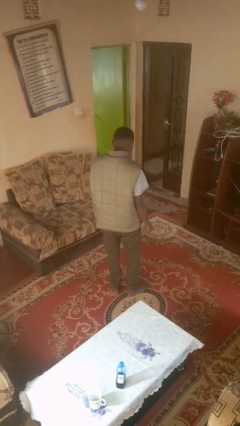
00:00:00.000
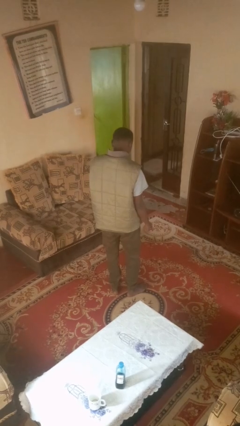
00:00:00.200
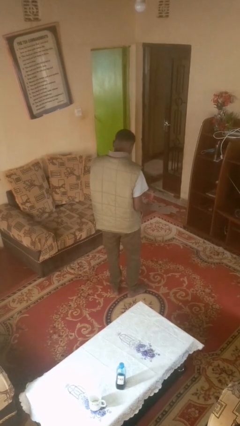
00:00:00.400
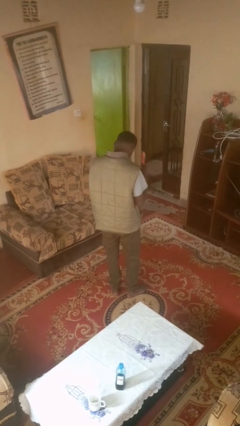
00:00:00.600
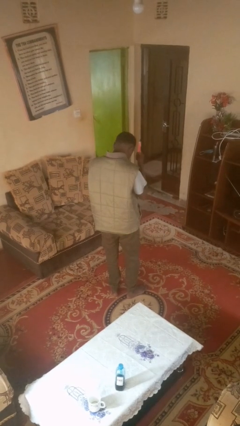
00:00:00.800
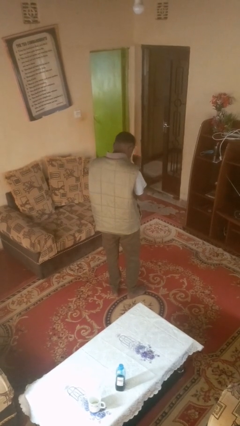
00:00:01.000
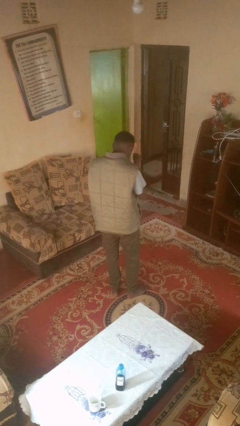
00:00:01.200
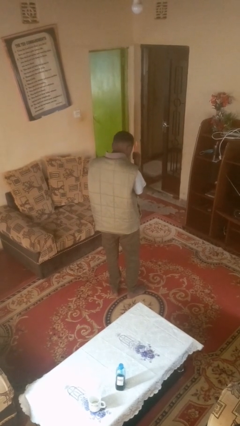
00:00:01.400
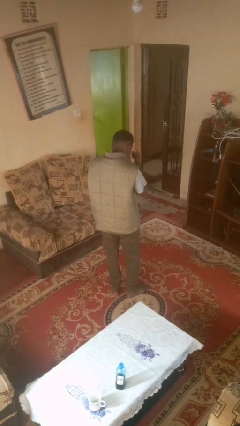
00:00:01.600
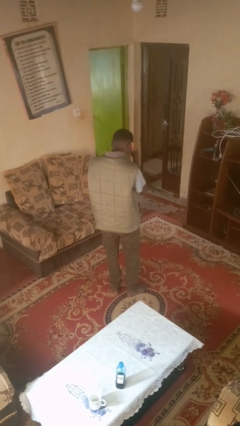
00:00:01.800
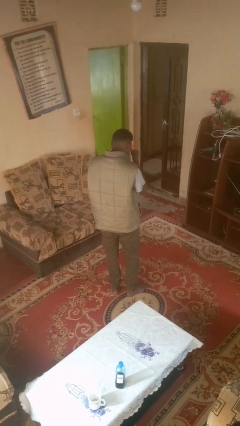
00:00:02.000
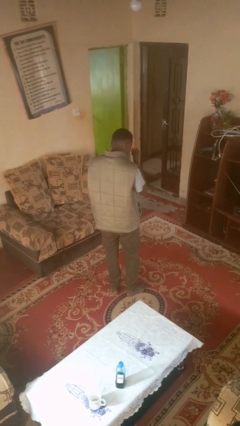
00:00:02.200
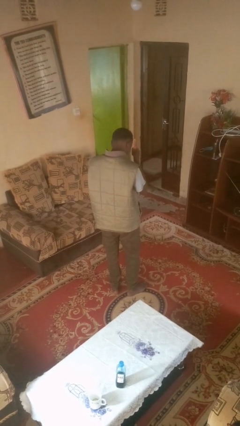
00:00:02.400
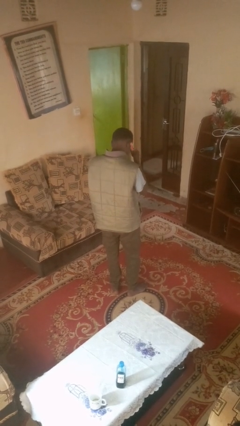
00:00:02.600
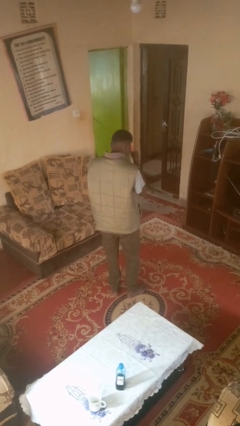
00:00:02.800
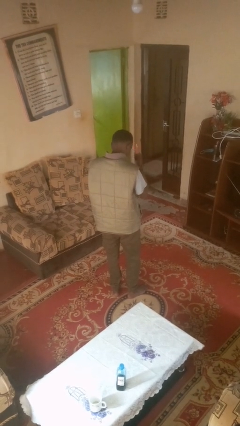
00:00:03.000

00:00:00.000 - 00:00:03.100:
person brushes hair

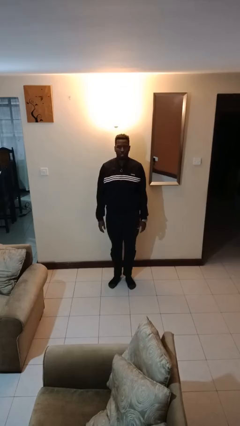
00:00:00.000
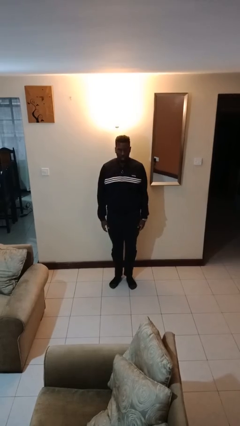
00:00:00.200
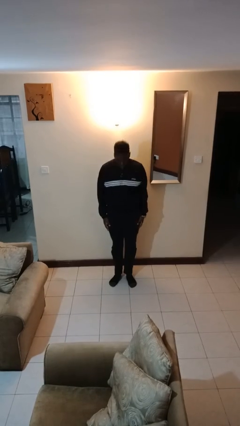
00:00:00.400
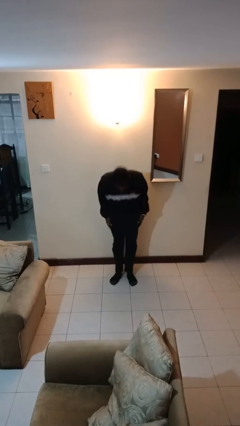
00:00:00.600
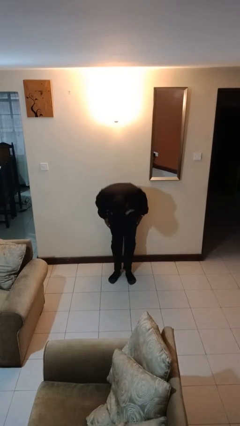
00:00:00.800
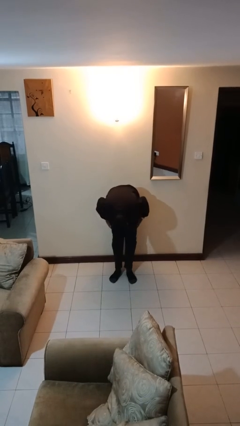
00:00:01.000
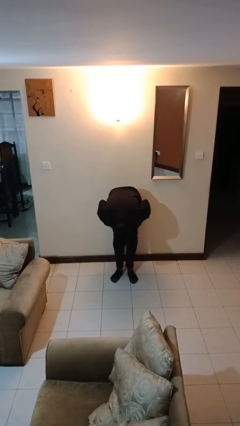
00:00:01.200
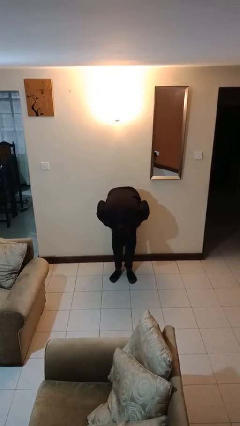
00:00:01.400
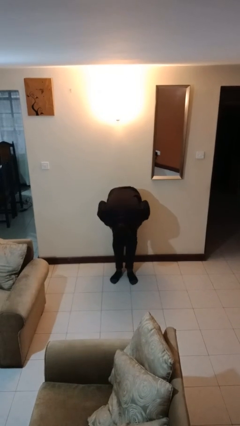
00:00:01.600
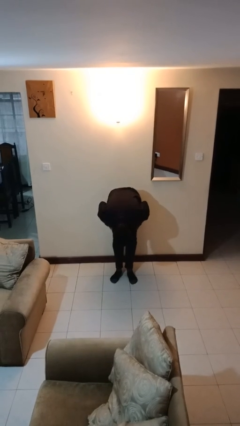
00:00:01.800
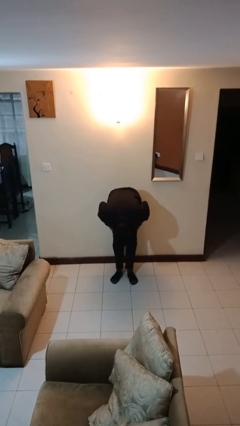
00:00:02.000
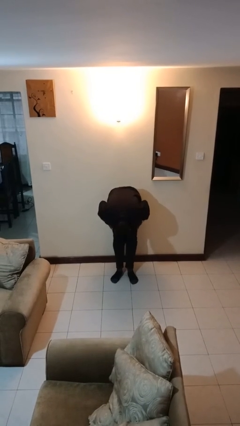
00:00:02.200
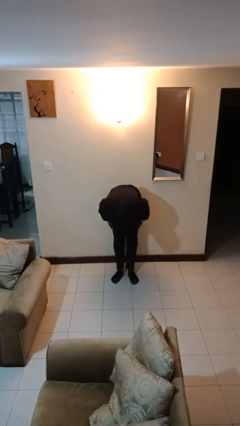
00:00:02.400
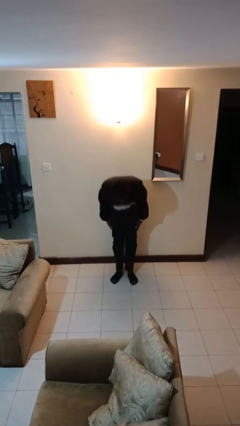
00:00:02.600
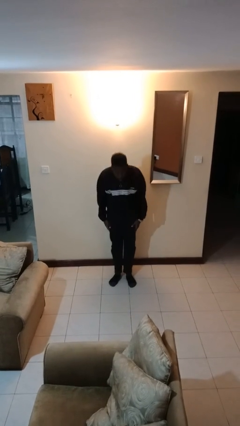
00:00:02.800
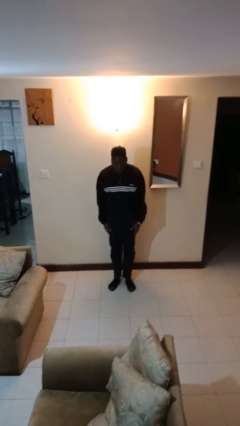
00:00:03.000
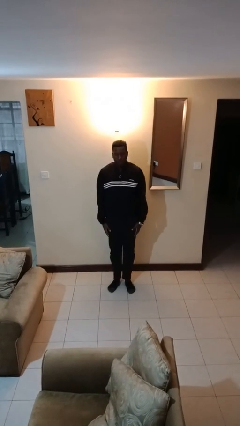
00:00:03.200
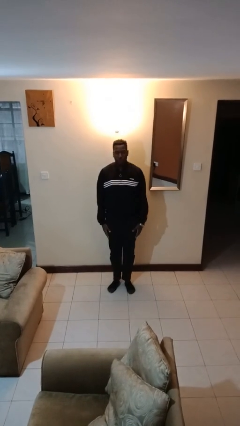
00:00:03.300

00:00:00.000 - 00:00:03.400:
person bows

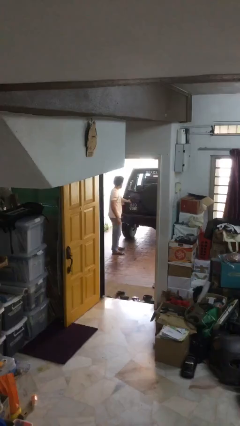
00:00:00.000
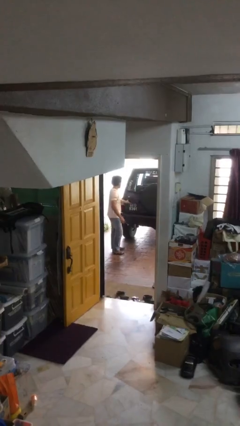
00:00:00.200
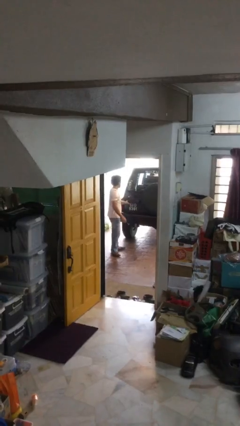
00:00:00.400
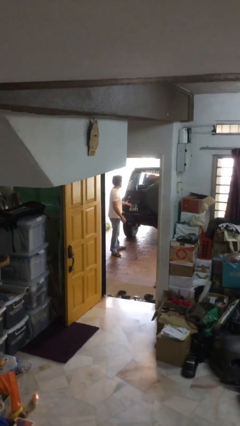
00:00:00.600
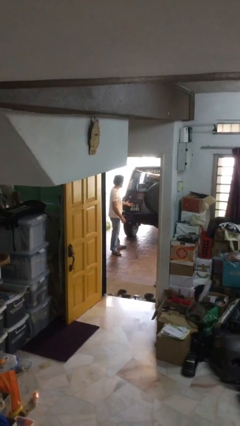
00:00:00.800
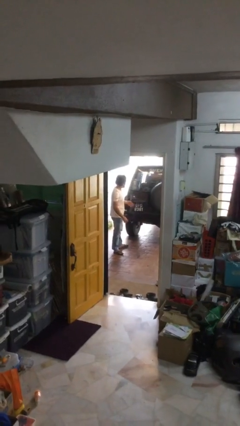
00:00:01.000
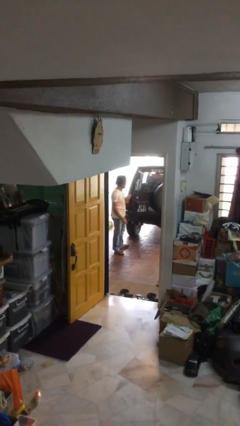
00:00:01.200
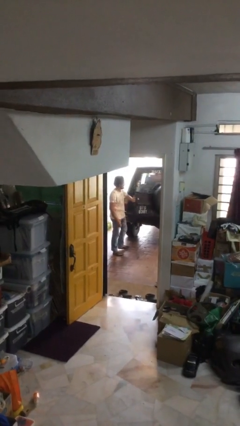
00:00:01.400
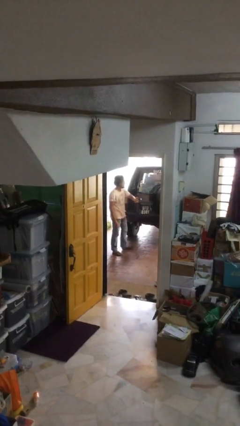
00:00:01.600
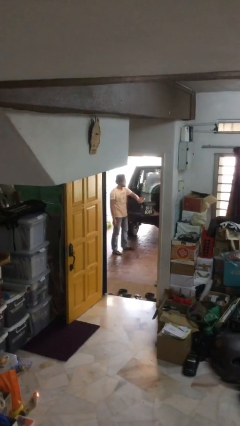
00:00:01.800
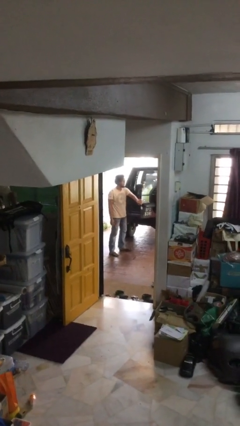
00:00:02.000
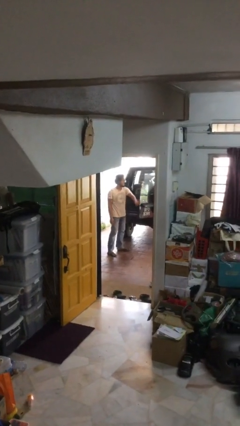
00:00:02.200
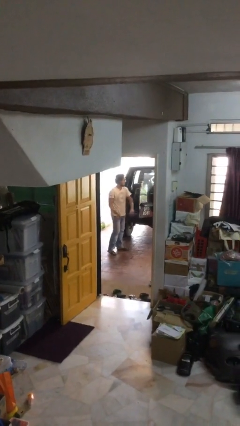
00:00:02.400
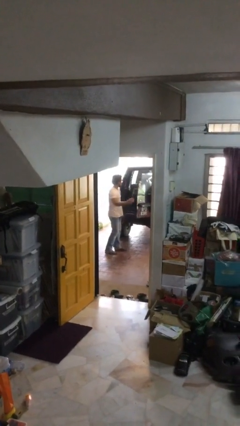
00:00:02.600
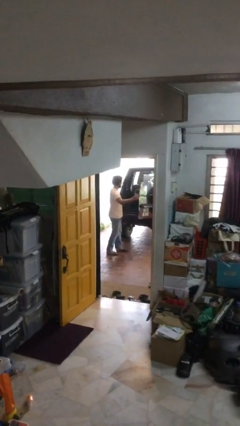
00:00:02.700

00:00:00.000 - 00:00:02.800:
person opens car trunk

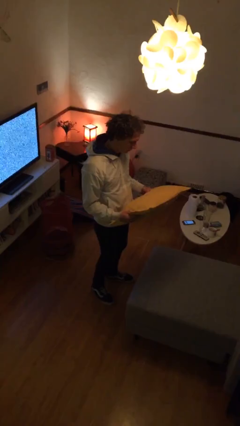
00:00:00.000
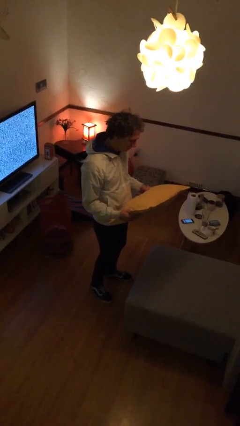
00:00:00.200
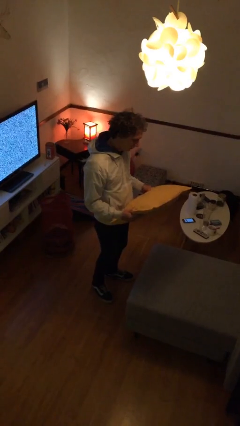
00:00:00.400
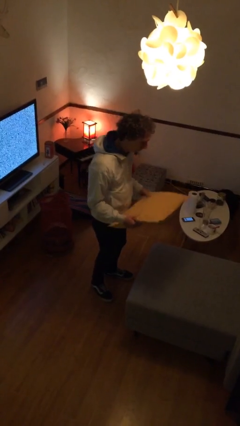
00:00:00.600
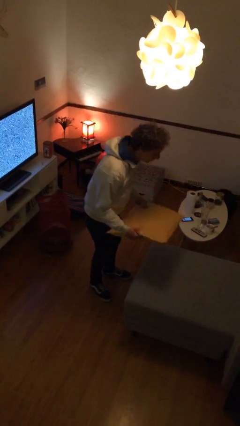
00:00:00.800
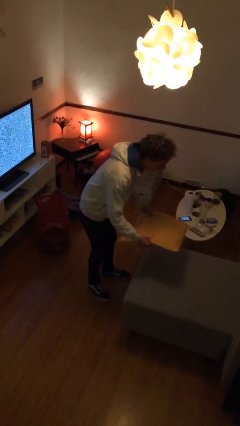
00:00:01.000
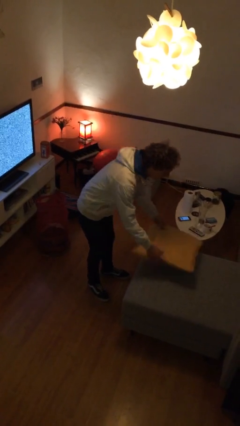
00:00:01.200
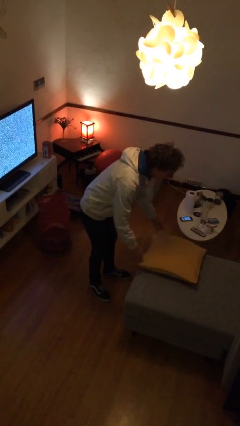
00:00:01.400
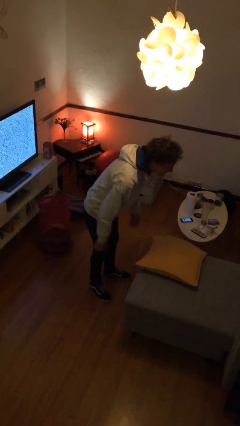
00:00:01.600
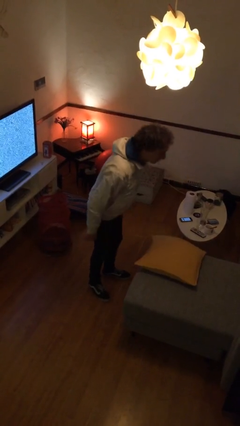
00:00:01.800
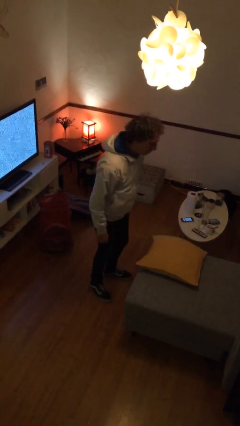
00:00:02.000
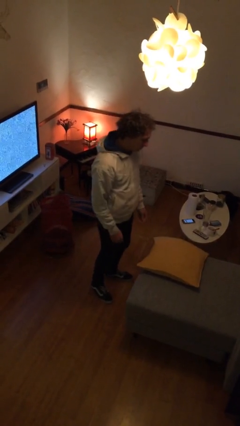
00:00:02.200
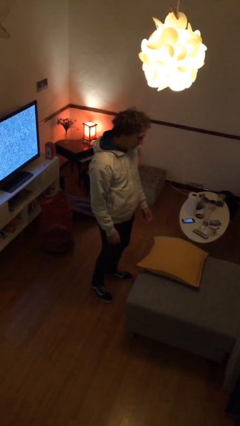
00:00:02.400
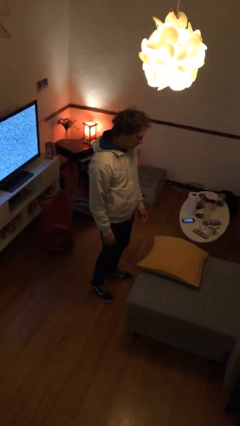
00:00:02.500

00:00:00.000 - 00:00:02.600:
person puts down object on couch

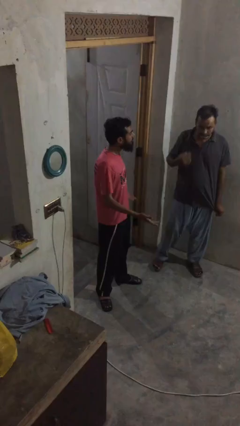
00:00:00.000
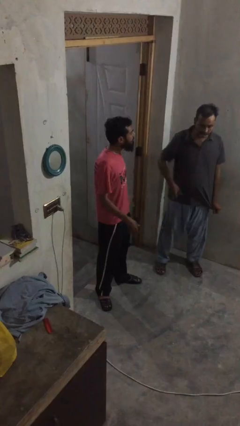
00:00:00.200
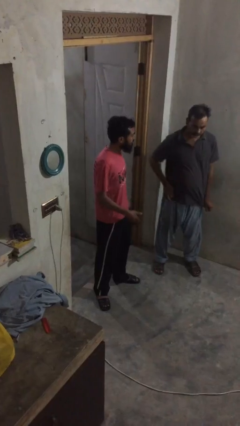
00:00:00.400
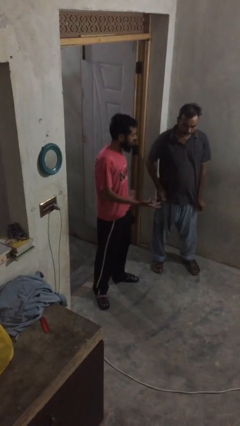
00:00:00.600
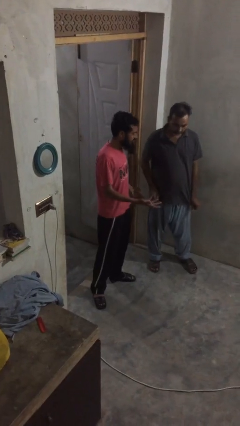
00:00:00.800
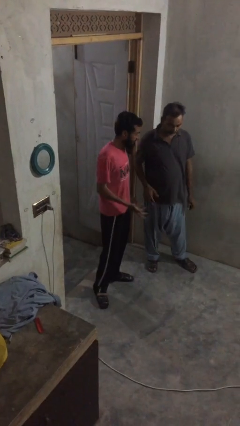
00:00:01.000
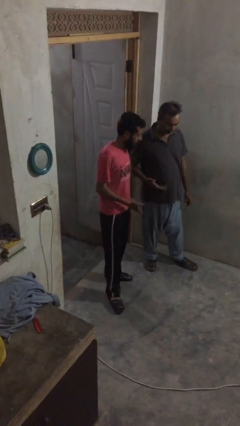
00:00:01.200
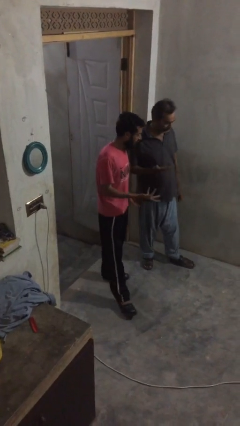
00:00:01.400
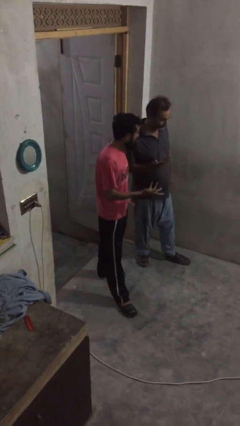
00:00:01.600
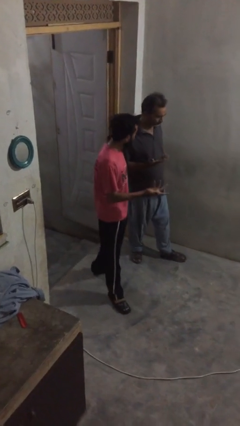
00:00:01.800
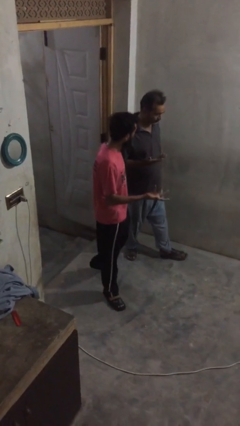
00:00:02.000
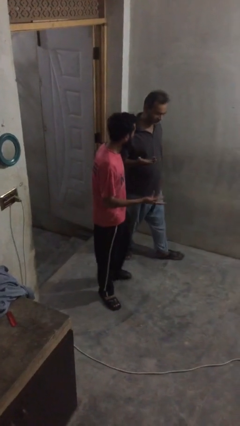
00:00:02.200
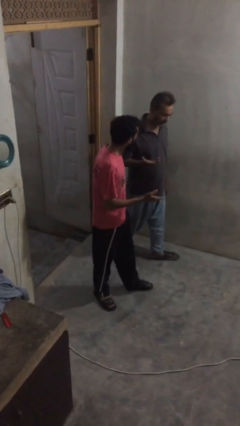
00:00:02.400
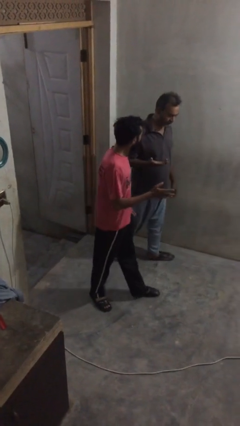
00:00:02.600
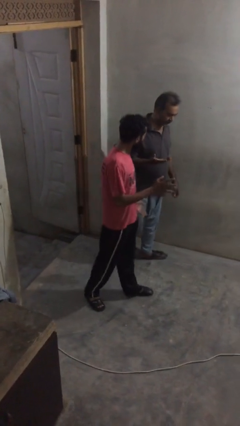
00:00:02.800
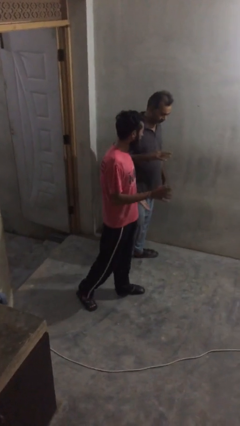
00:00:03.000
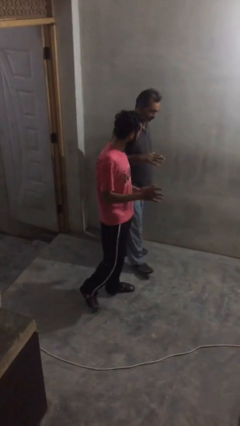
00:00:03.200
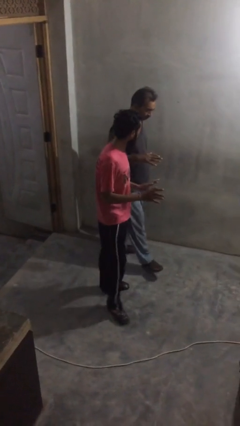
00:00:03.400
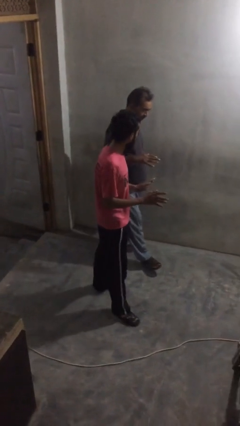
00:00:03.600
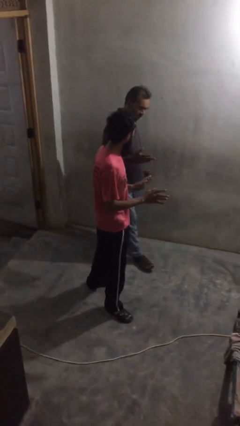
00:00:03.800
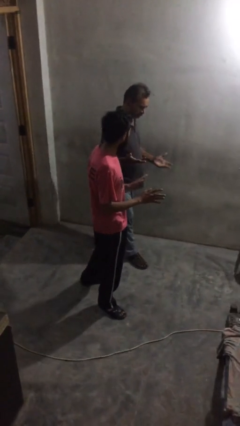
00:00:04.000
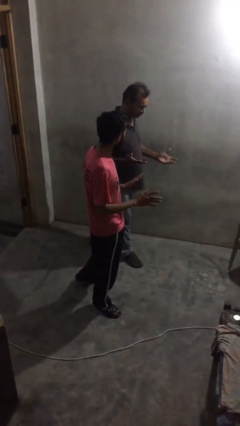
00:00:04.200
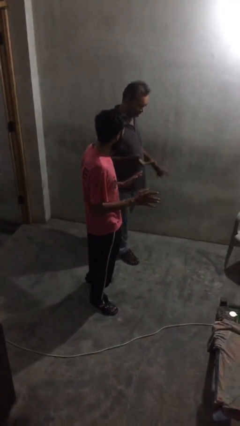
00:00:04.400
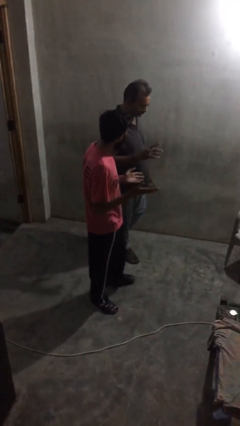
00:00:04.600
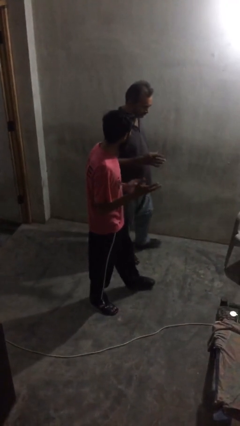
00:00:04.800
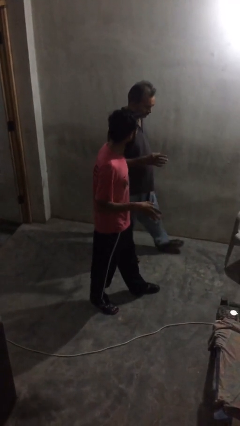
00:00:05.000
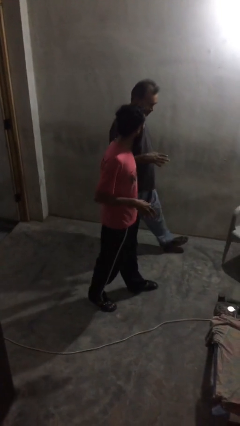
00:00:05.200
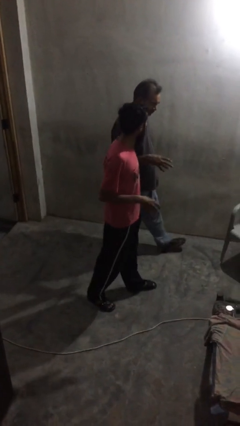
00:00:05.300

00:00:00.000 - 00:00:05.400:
person talks to person
